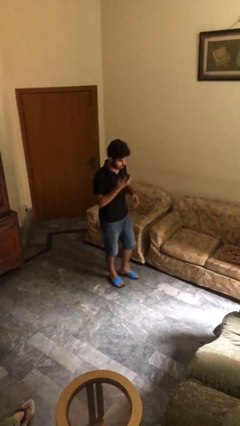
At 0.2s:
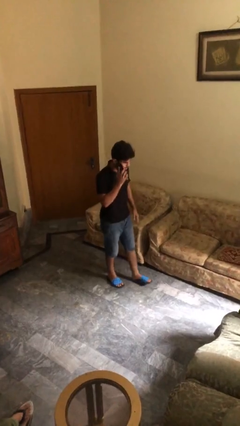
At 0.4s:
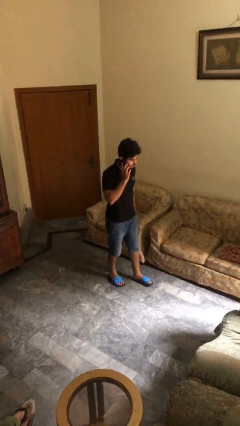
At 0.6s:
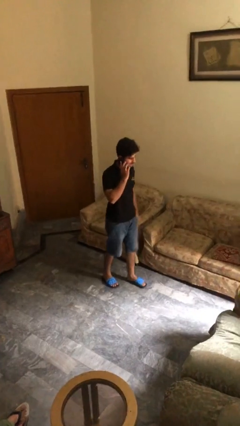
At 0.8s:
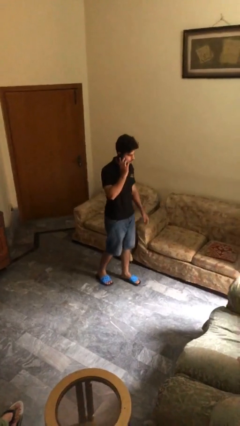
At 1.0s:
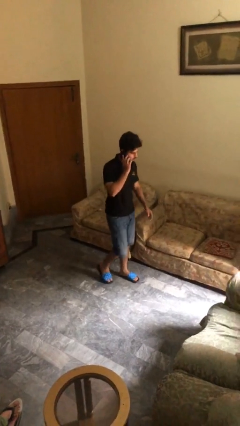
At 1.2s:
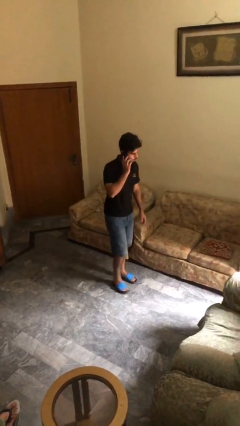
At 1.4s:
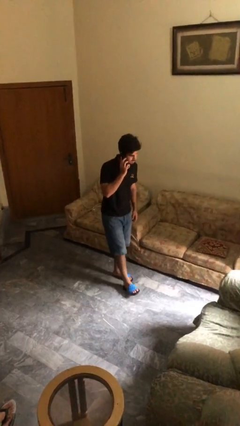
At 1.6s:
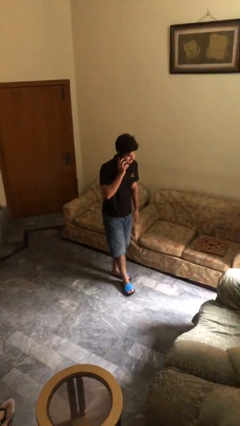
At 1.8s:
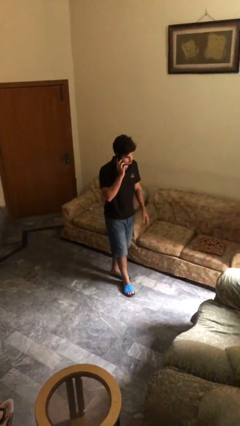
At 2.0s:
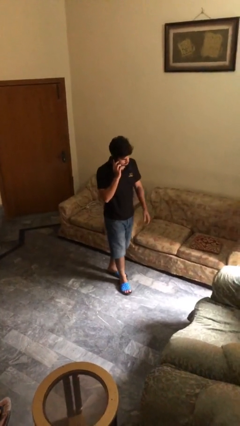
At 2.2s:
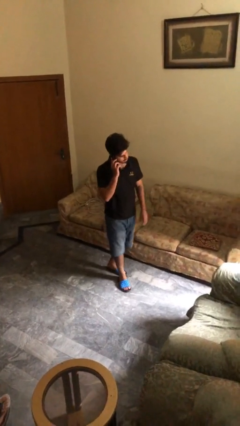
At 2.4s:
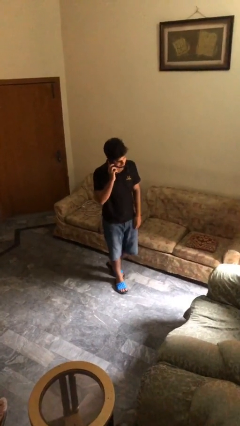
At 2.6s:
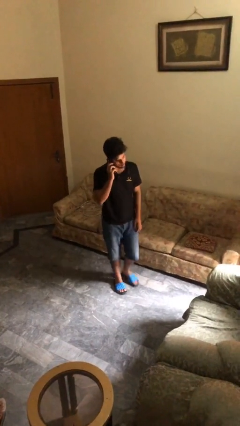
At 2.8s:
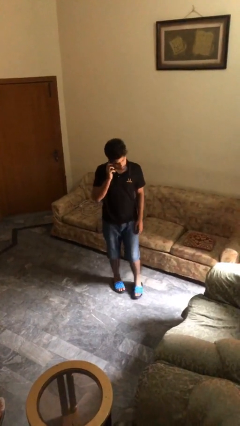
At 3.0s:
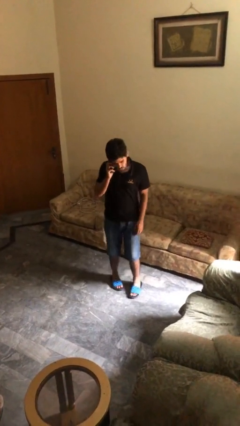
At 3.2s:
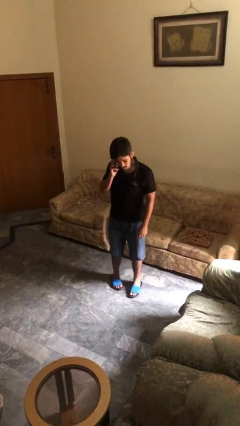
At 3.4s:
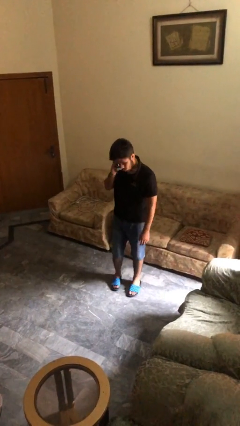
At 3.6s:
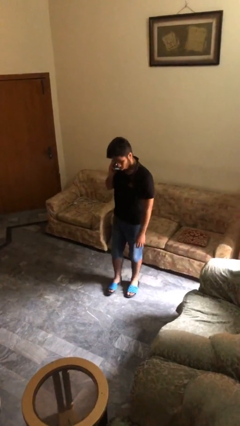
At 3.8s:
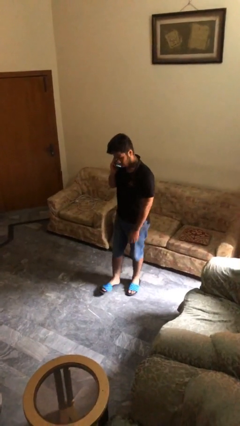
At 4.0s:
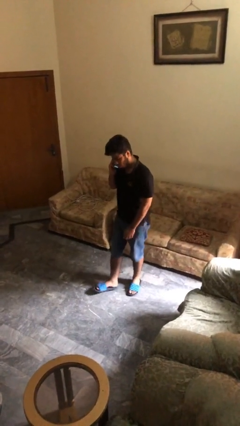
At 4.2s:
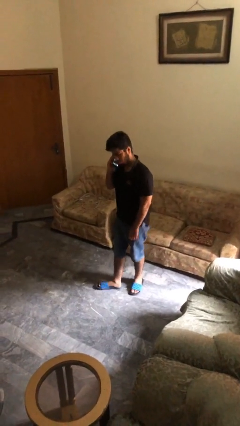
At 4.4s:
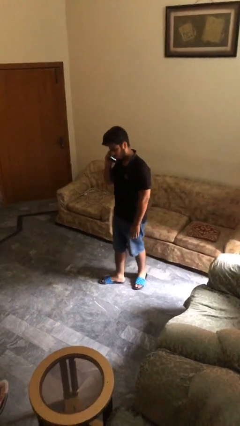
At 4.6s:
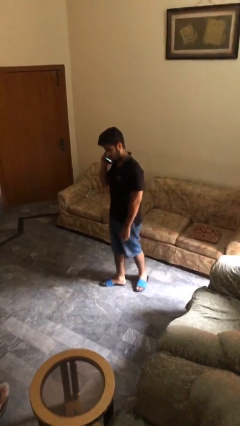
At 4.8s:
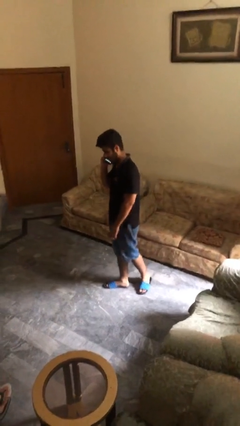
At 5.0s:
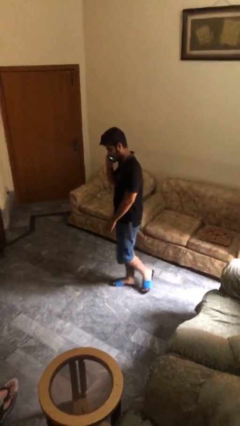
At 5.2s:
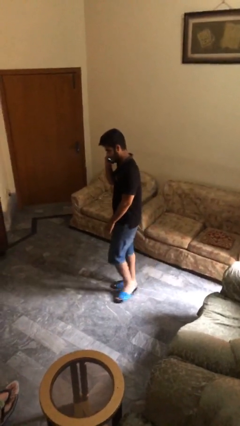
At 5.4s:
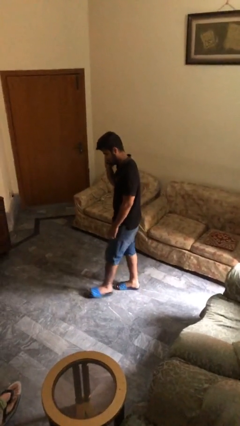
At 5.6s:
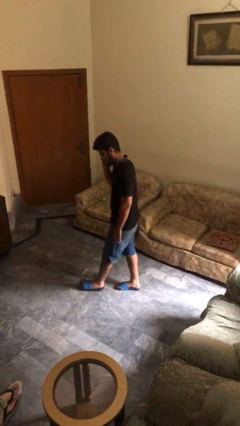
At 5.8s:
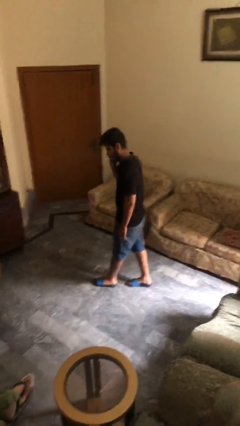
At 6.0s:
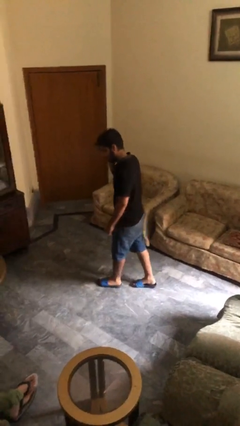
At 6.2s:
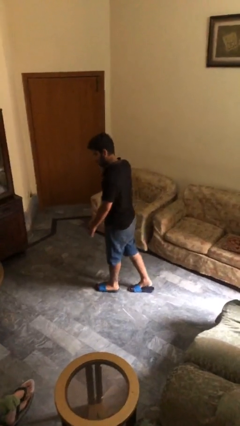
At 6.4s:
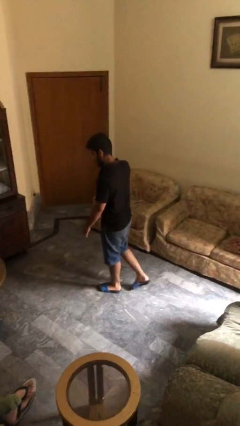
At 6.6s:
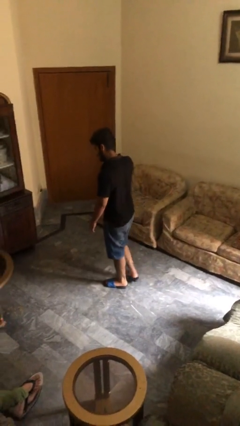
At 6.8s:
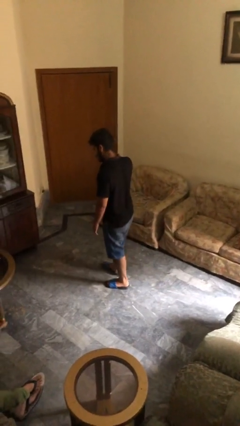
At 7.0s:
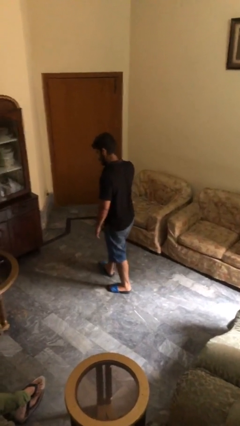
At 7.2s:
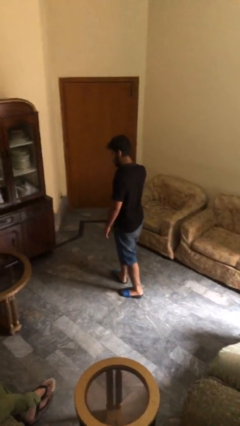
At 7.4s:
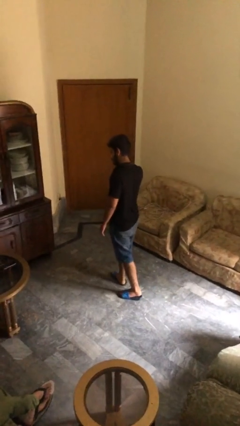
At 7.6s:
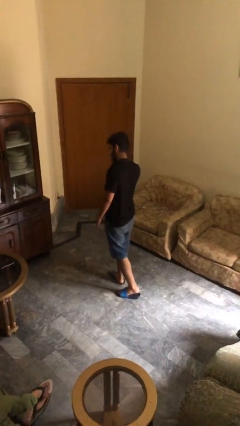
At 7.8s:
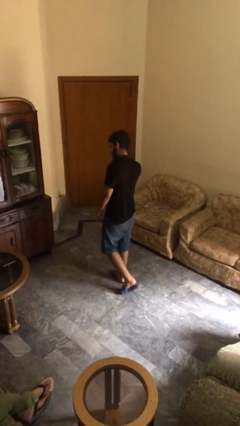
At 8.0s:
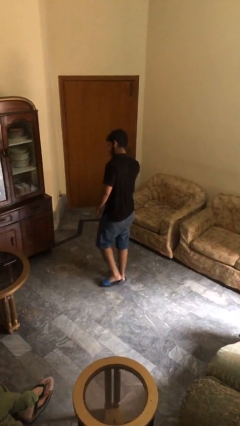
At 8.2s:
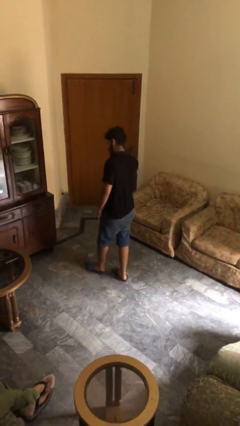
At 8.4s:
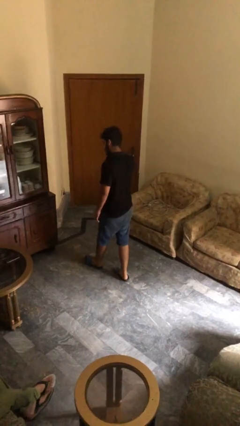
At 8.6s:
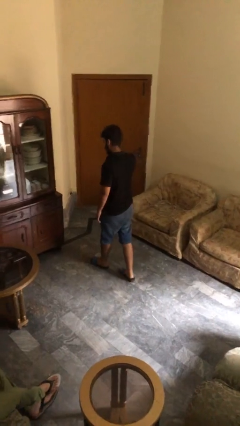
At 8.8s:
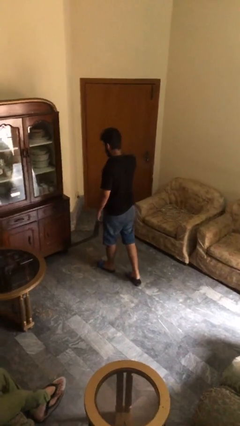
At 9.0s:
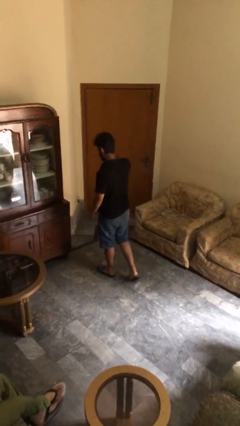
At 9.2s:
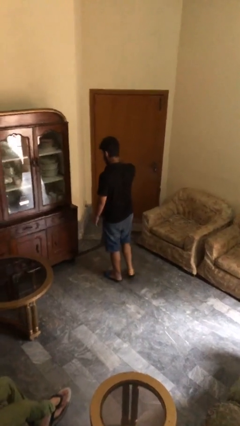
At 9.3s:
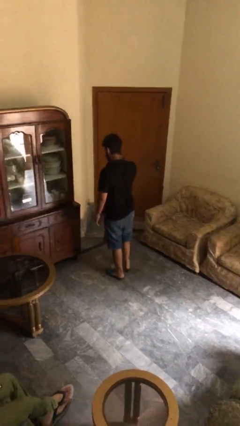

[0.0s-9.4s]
person talks on phone

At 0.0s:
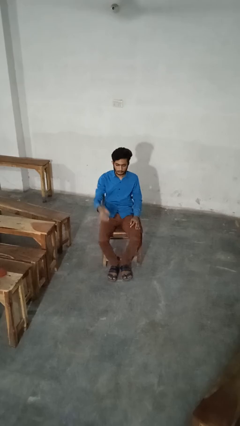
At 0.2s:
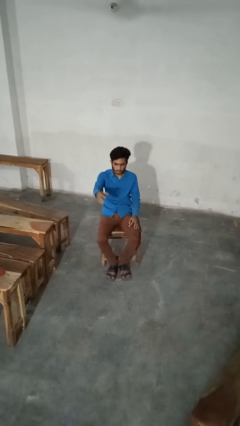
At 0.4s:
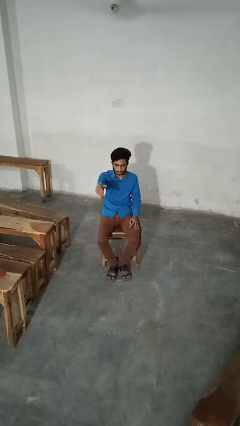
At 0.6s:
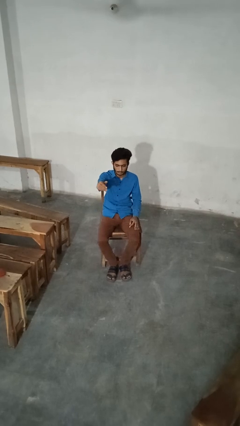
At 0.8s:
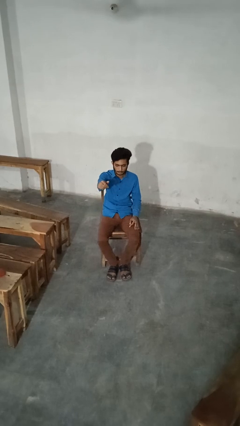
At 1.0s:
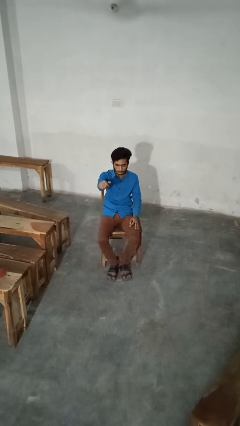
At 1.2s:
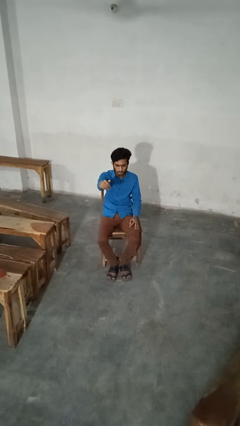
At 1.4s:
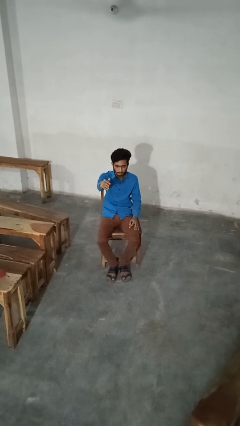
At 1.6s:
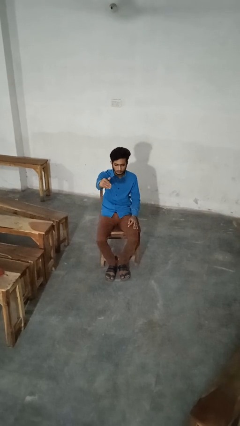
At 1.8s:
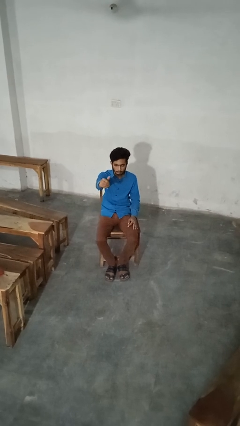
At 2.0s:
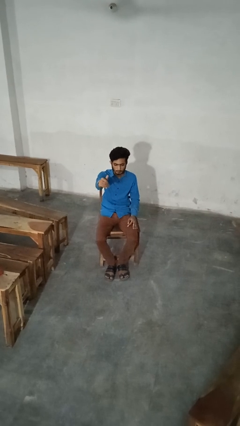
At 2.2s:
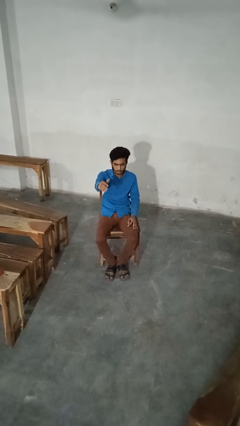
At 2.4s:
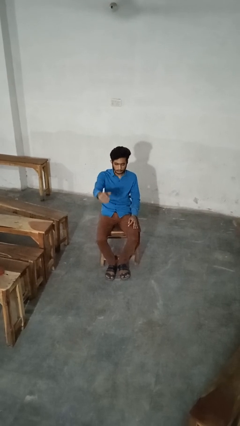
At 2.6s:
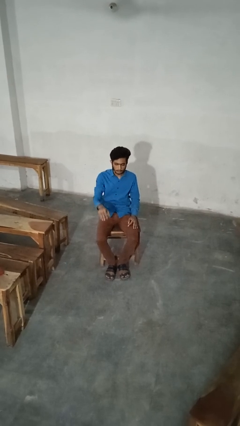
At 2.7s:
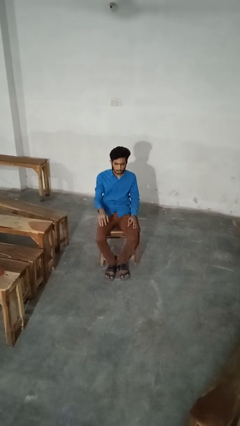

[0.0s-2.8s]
person gestures come here

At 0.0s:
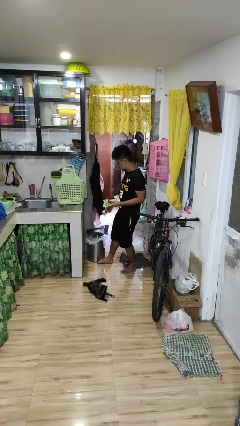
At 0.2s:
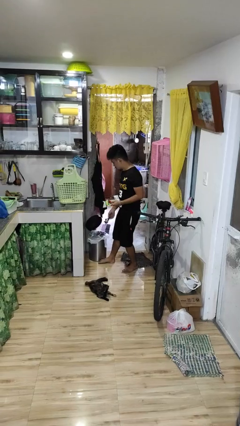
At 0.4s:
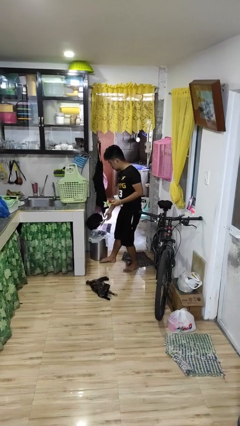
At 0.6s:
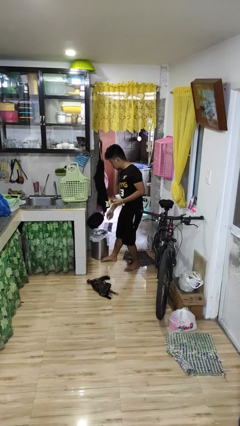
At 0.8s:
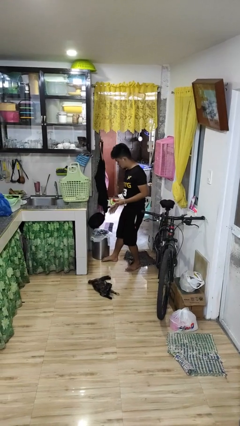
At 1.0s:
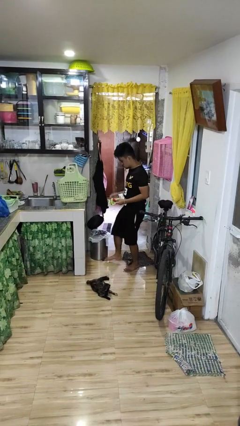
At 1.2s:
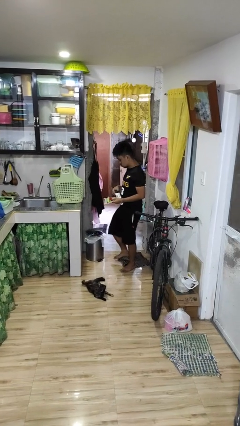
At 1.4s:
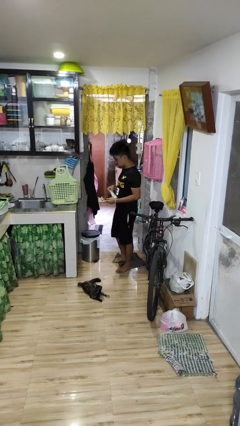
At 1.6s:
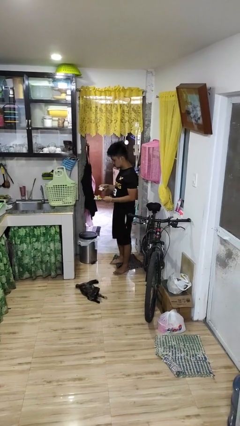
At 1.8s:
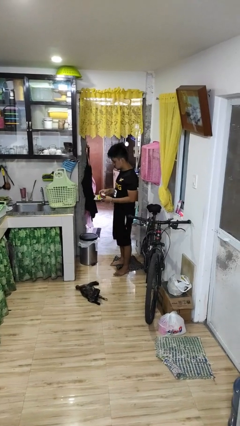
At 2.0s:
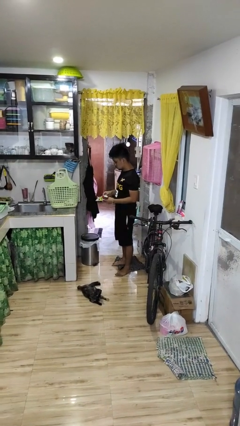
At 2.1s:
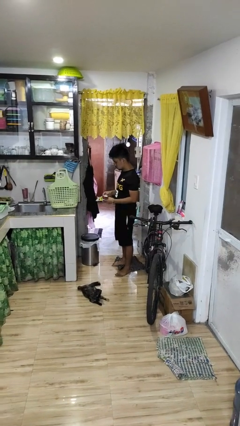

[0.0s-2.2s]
person discards trash

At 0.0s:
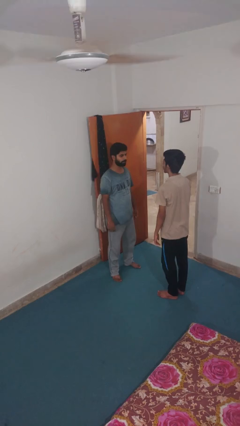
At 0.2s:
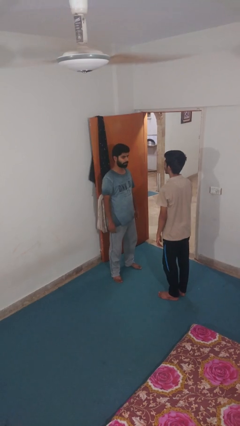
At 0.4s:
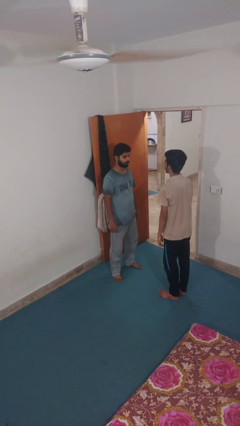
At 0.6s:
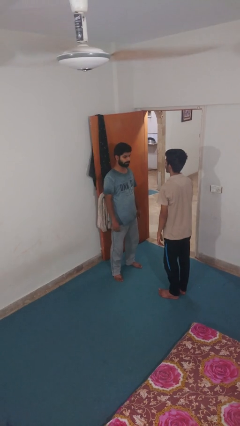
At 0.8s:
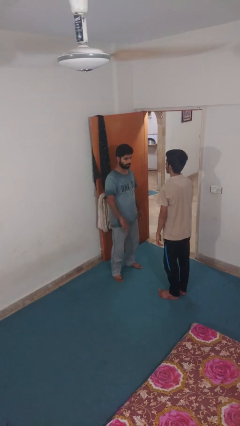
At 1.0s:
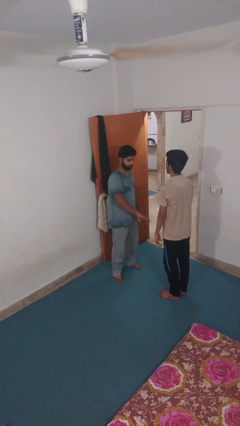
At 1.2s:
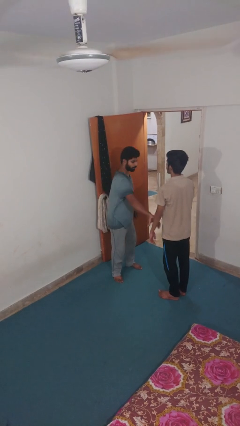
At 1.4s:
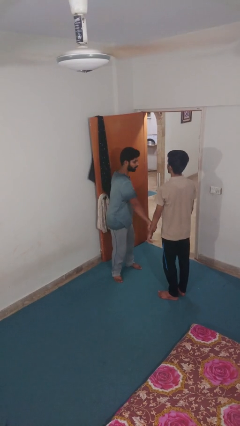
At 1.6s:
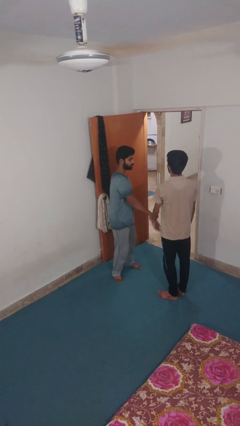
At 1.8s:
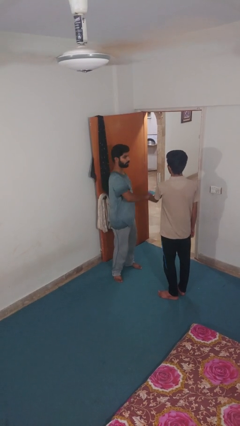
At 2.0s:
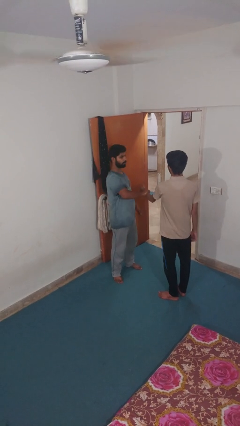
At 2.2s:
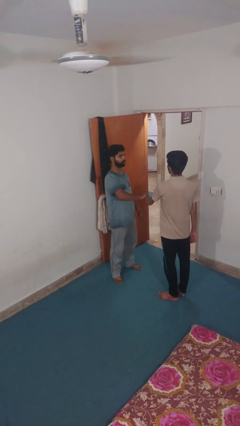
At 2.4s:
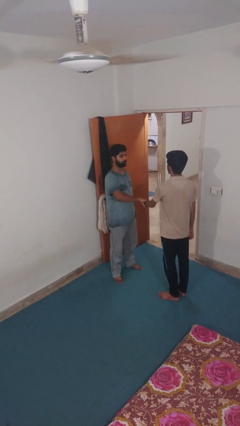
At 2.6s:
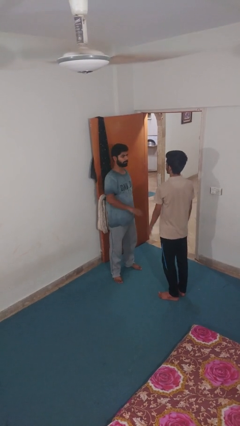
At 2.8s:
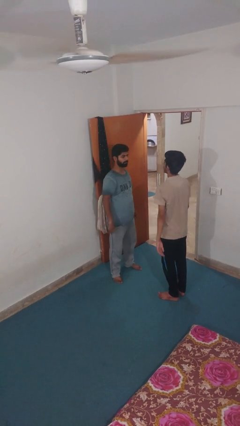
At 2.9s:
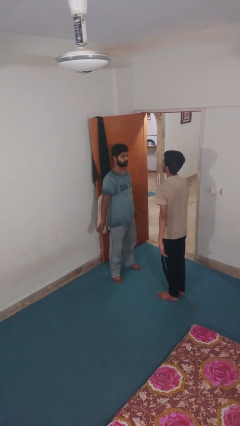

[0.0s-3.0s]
person grabs person by forearm
